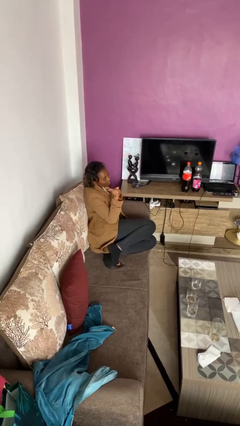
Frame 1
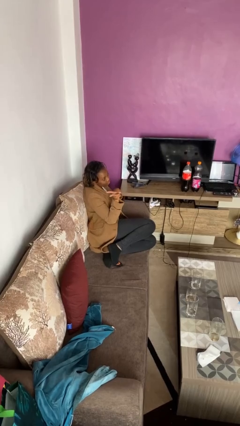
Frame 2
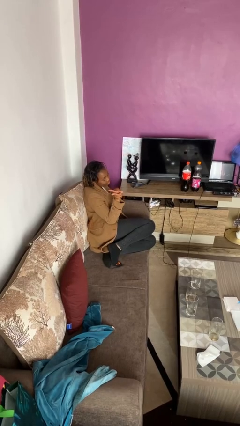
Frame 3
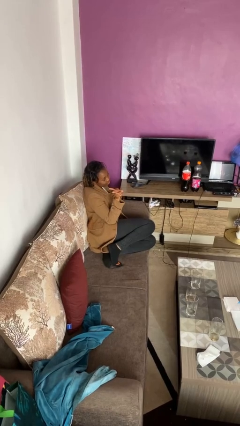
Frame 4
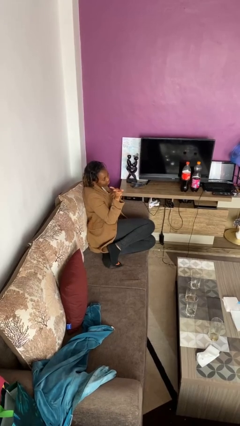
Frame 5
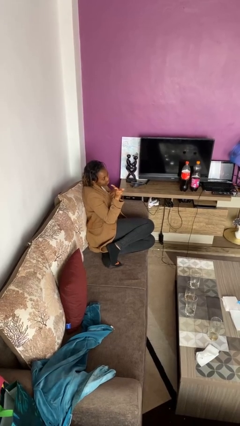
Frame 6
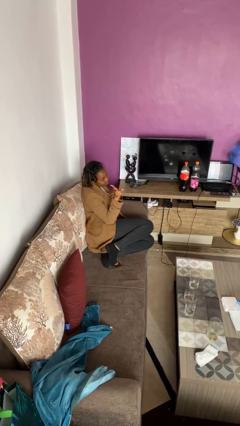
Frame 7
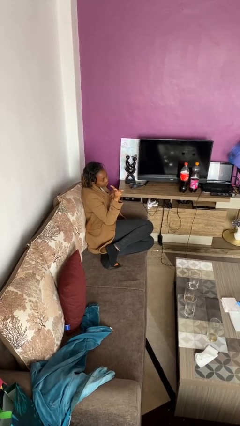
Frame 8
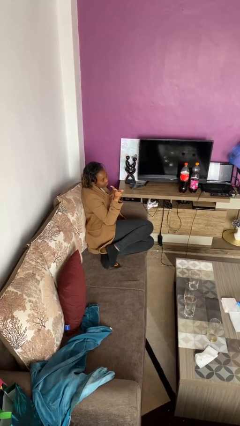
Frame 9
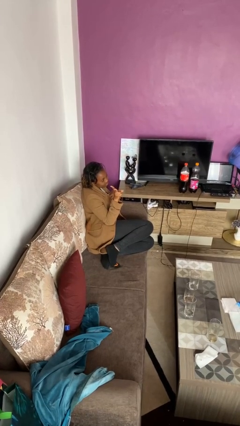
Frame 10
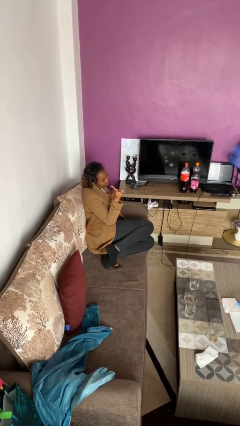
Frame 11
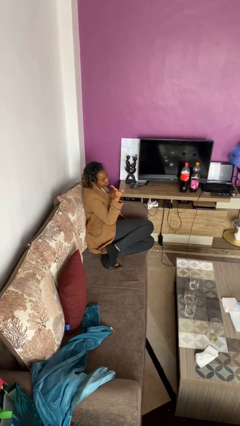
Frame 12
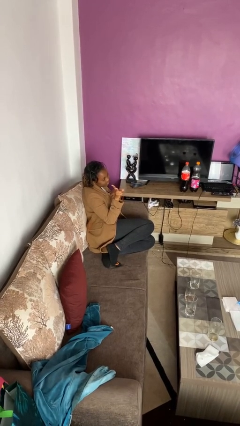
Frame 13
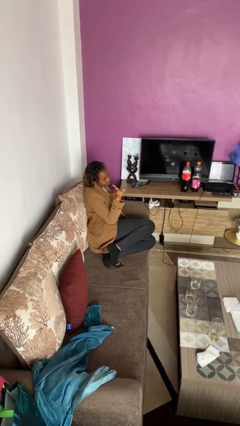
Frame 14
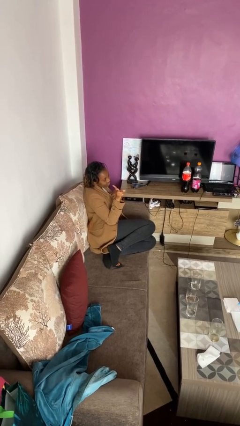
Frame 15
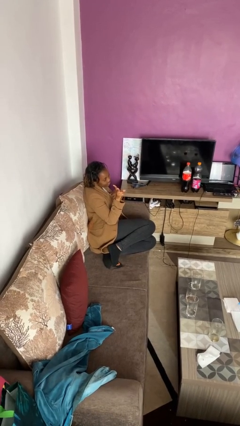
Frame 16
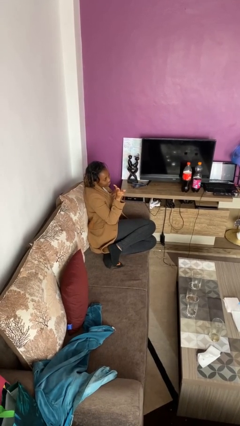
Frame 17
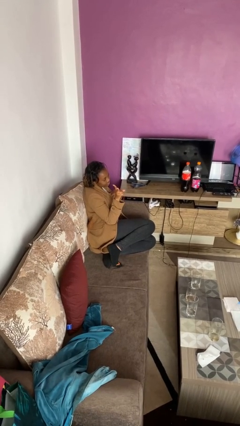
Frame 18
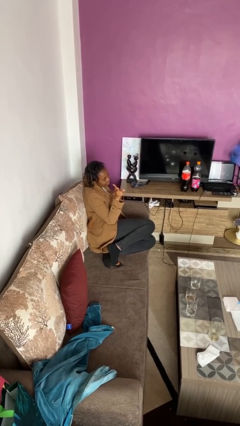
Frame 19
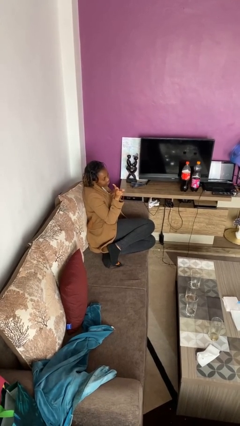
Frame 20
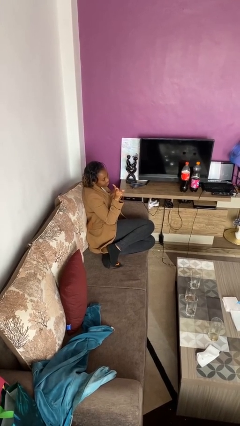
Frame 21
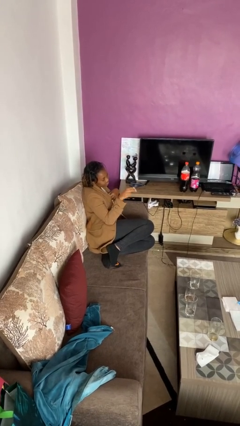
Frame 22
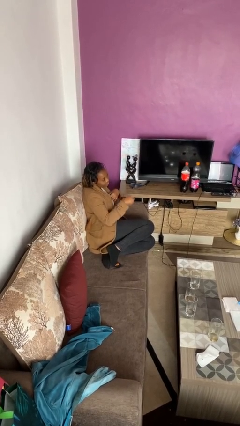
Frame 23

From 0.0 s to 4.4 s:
person gestures peace

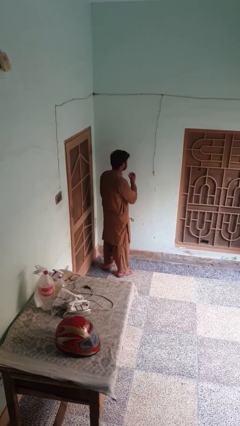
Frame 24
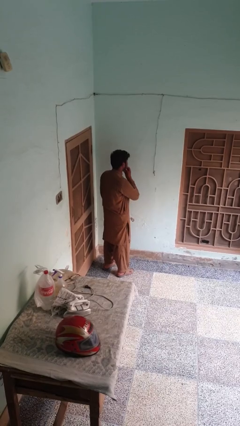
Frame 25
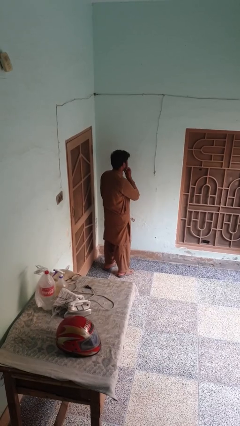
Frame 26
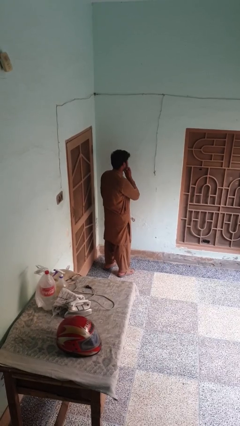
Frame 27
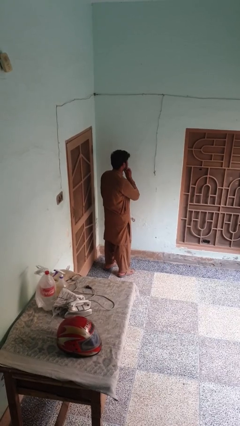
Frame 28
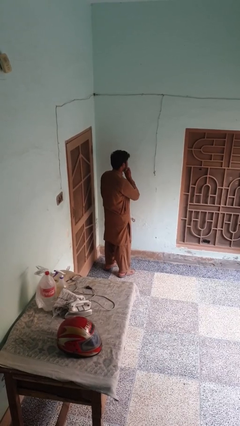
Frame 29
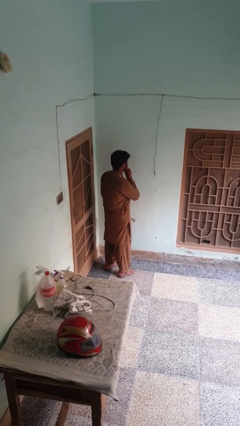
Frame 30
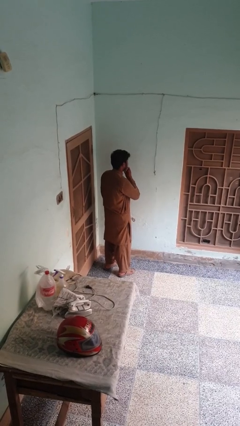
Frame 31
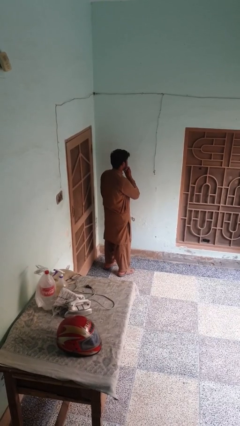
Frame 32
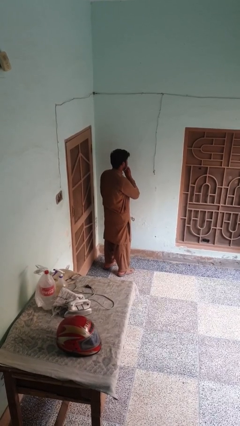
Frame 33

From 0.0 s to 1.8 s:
person strokes chin

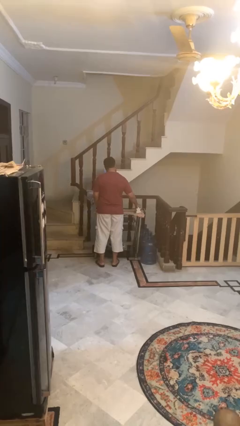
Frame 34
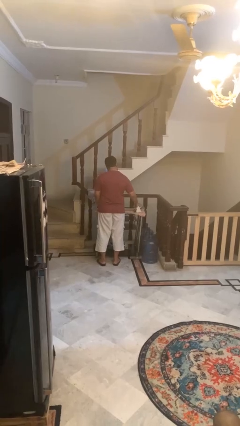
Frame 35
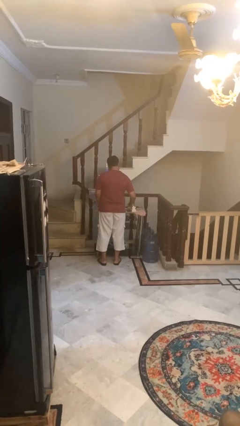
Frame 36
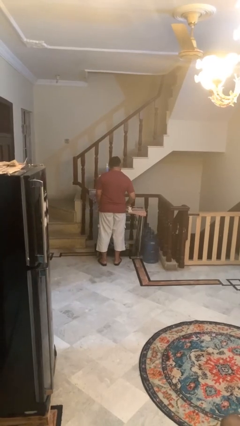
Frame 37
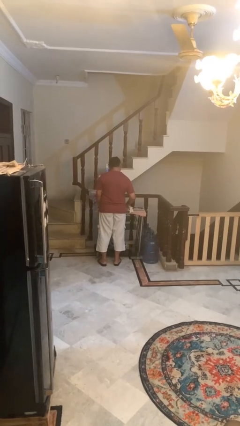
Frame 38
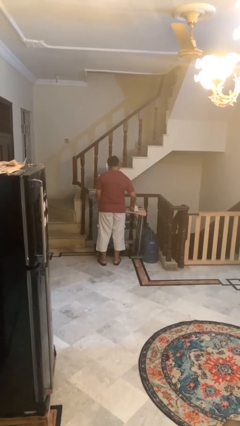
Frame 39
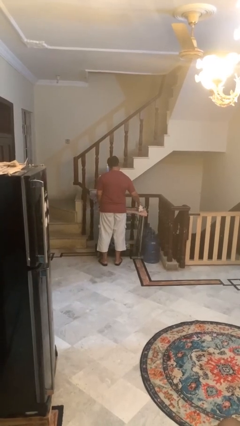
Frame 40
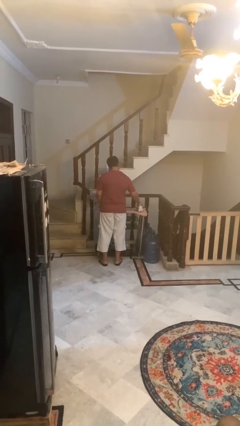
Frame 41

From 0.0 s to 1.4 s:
person irons clothes

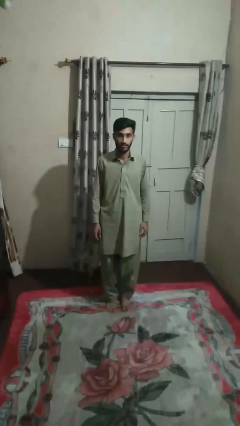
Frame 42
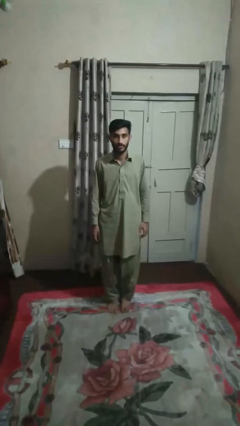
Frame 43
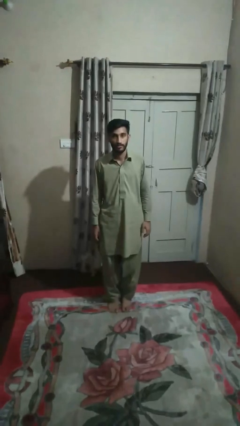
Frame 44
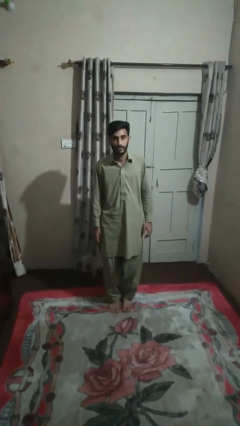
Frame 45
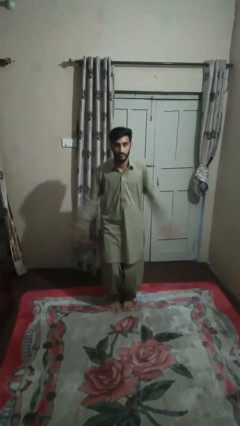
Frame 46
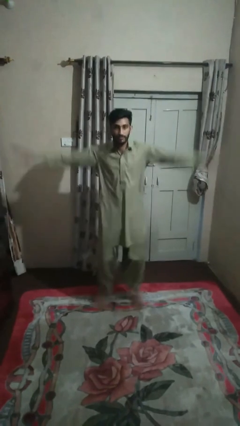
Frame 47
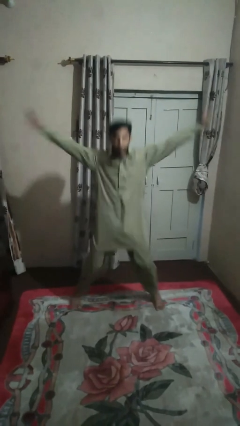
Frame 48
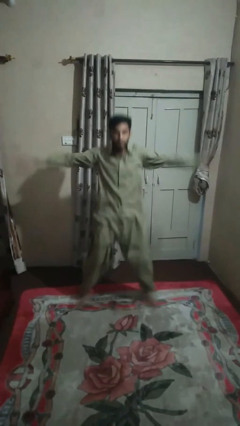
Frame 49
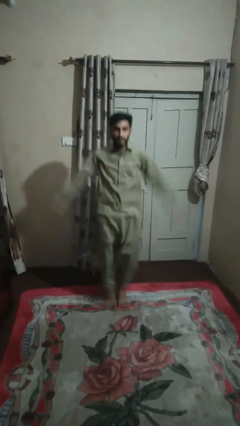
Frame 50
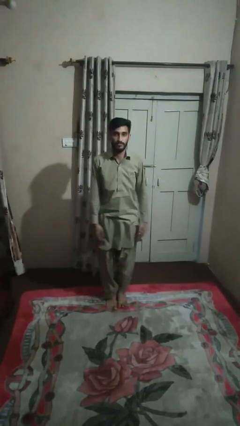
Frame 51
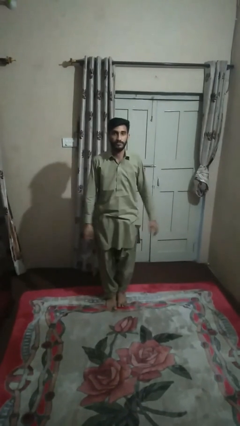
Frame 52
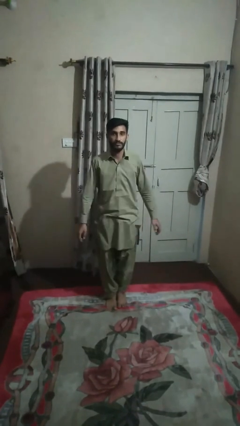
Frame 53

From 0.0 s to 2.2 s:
person exercises with jumping jacks

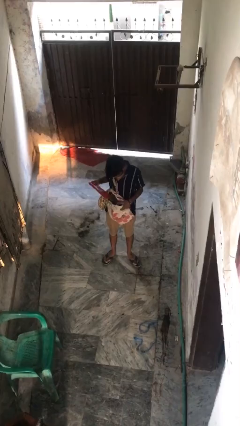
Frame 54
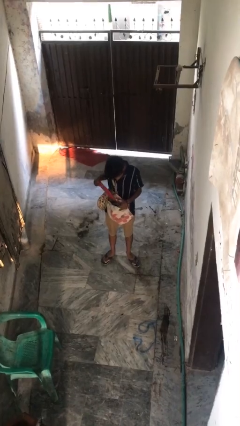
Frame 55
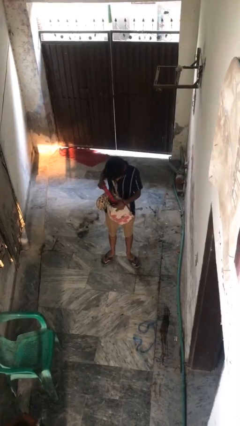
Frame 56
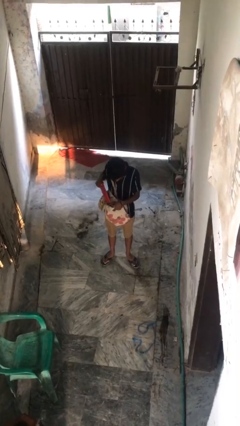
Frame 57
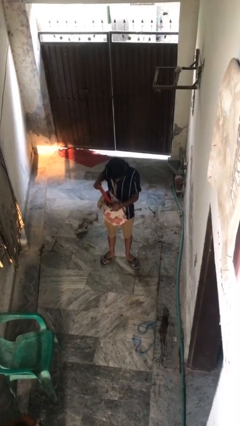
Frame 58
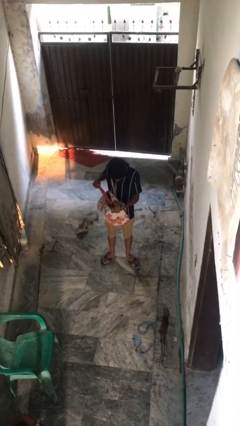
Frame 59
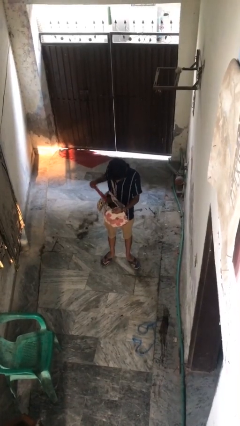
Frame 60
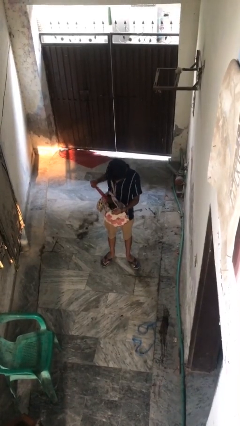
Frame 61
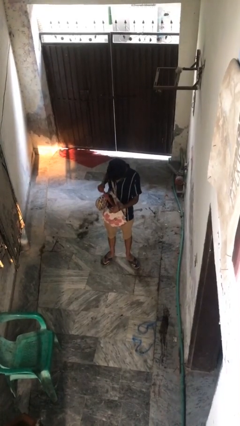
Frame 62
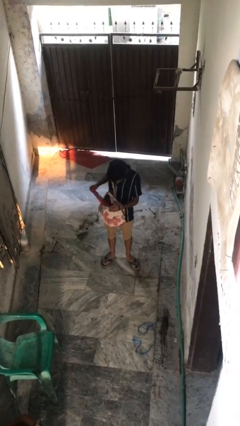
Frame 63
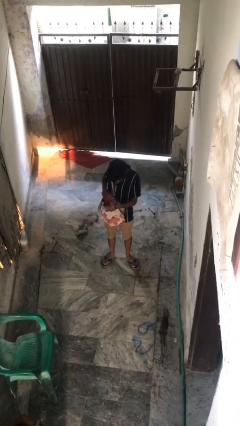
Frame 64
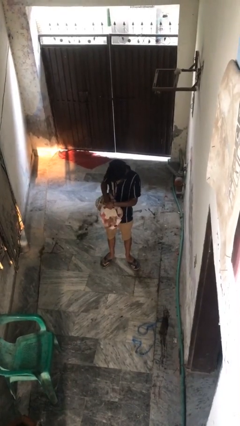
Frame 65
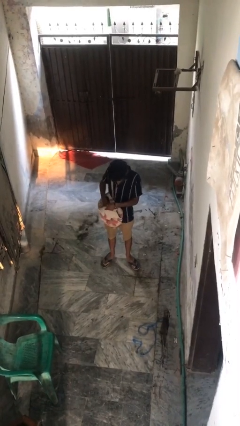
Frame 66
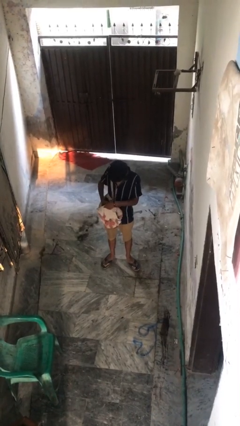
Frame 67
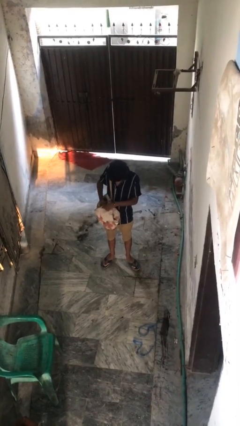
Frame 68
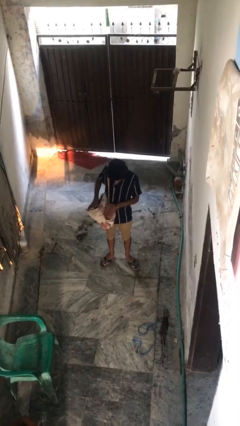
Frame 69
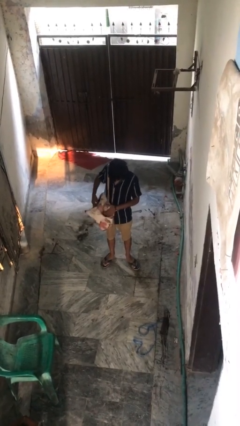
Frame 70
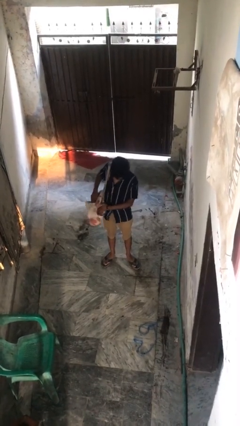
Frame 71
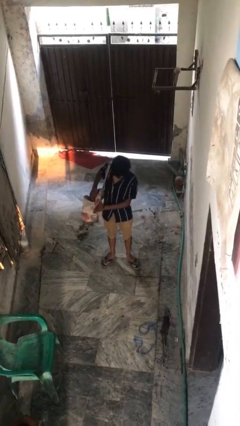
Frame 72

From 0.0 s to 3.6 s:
person puts object into backpack

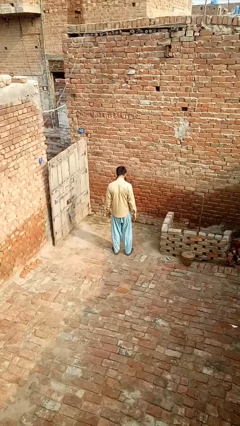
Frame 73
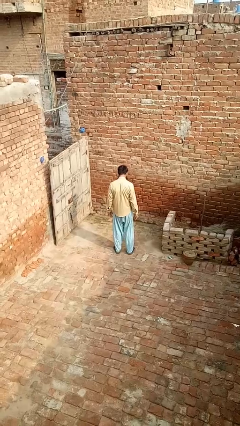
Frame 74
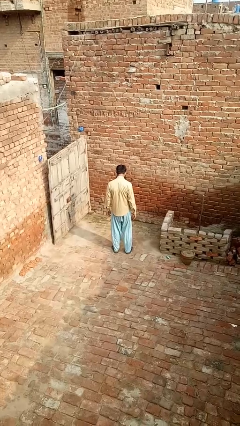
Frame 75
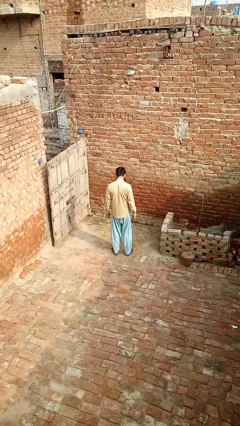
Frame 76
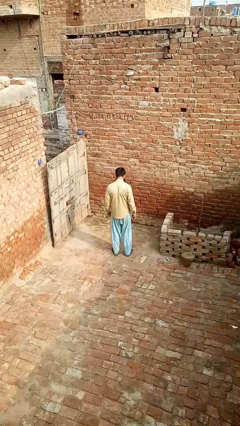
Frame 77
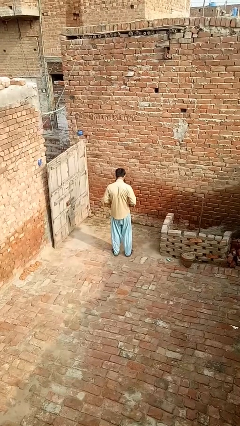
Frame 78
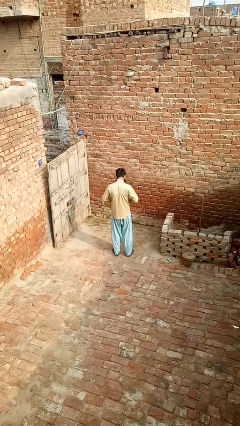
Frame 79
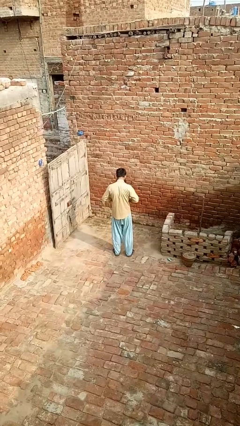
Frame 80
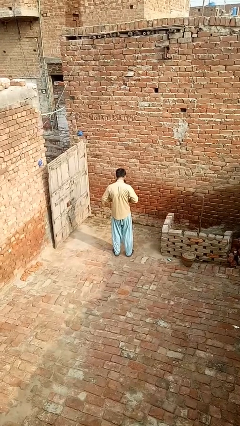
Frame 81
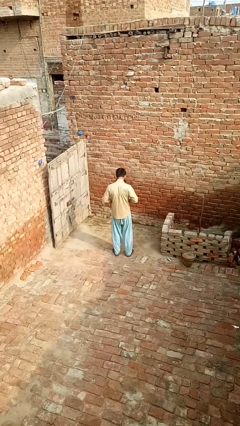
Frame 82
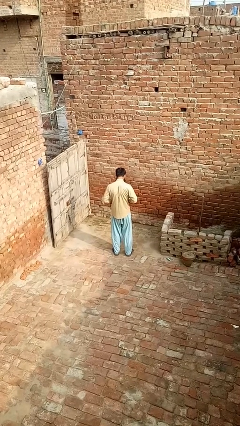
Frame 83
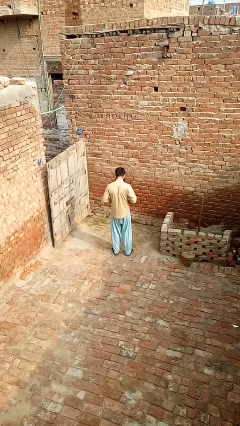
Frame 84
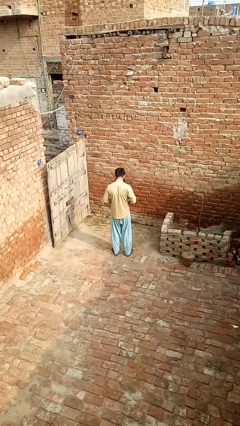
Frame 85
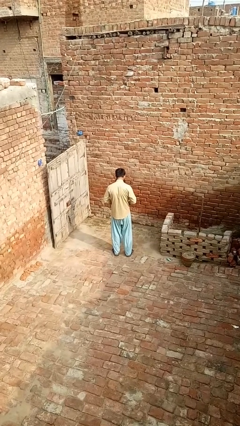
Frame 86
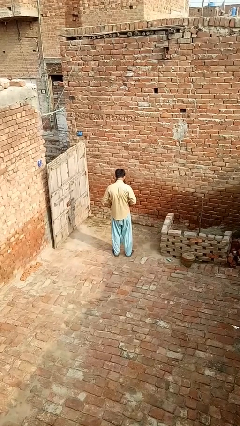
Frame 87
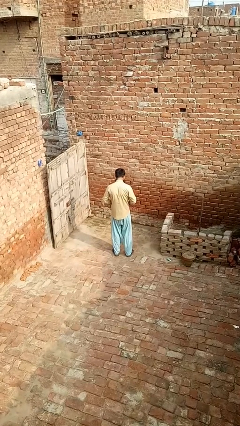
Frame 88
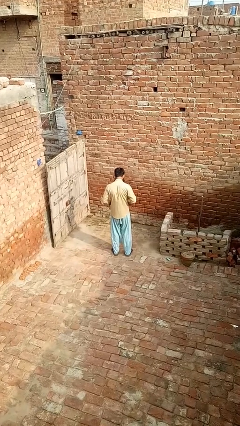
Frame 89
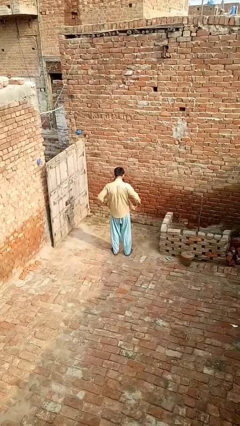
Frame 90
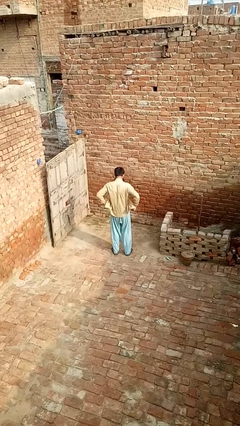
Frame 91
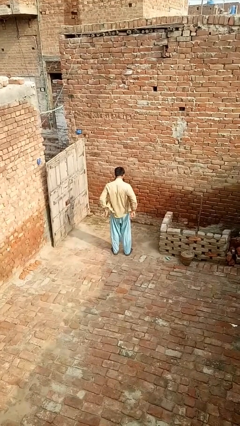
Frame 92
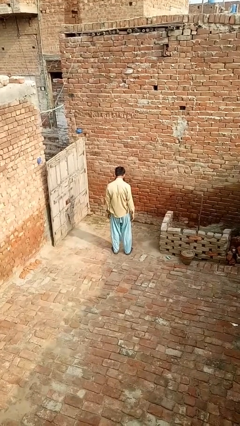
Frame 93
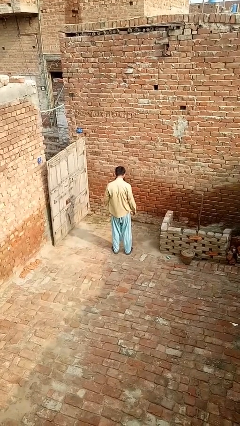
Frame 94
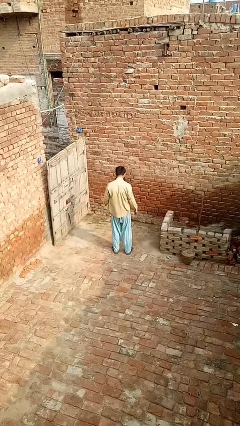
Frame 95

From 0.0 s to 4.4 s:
person unbuttons shirt
